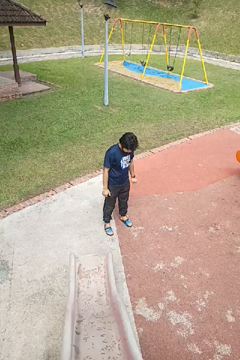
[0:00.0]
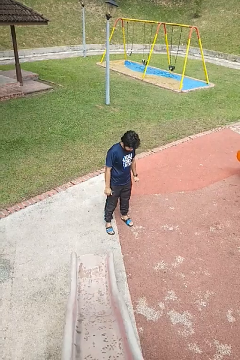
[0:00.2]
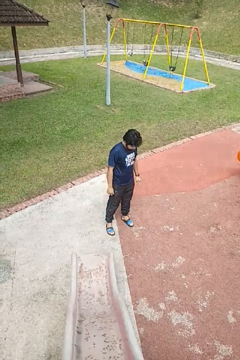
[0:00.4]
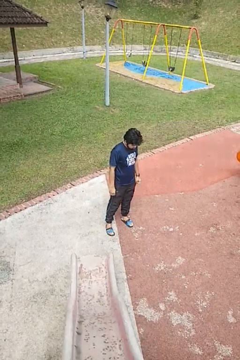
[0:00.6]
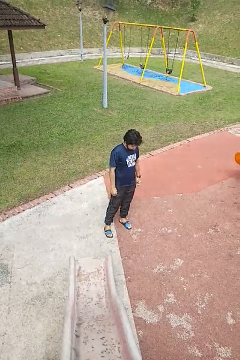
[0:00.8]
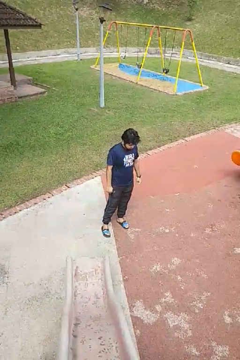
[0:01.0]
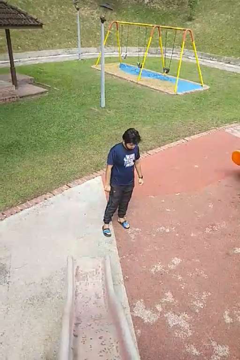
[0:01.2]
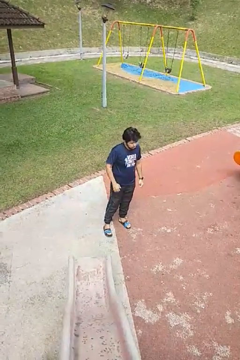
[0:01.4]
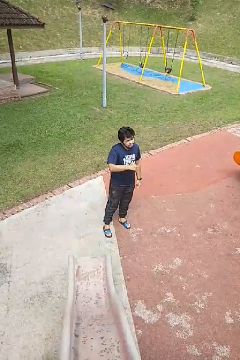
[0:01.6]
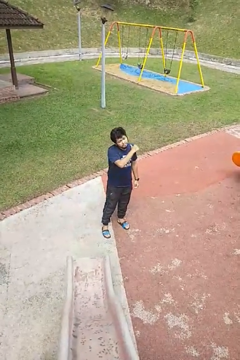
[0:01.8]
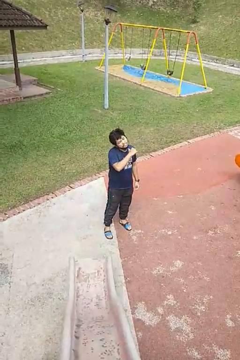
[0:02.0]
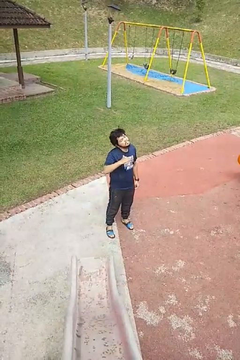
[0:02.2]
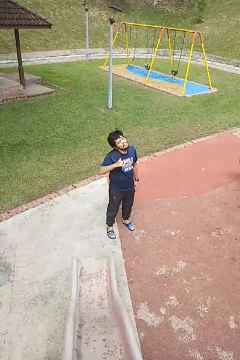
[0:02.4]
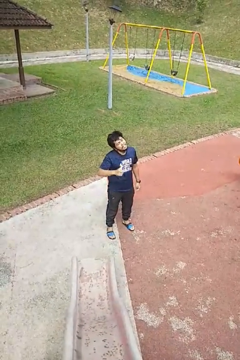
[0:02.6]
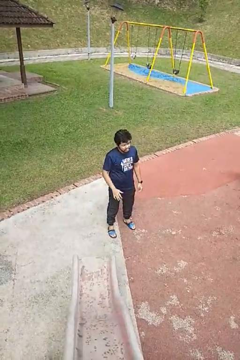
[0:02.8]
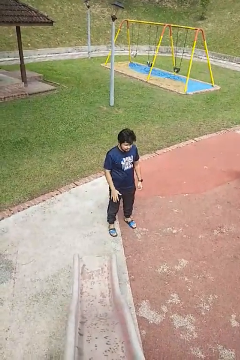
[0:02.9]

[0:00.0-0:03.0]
person gestures cut

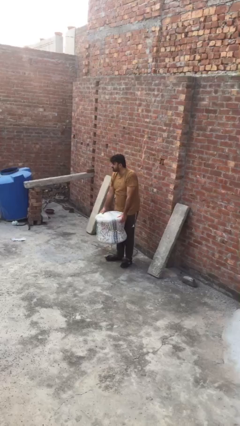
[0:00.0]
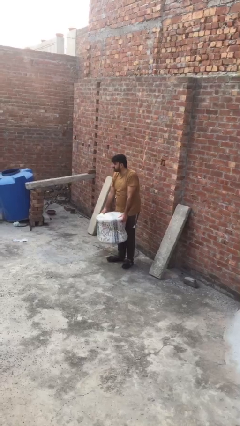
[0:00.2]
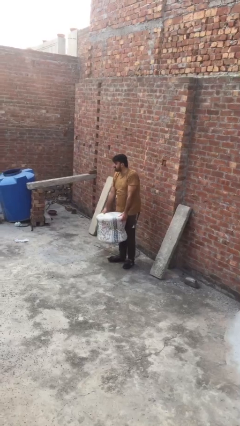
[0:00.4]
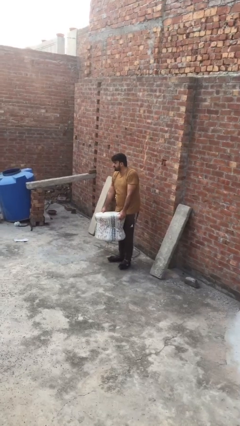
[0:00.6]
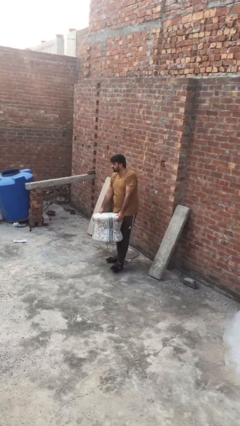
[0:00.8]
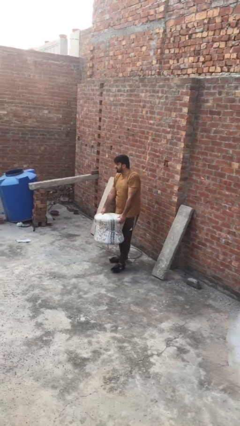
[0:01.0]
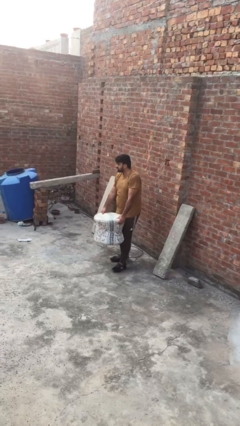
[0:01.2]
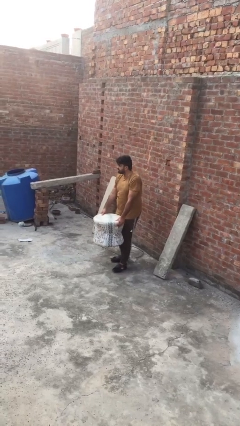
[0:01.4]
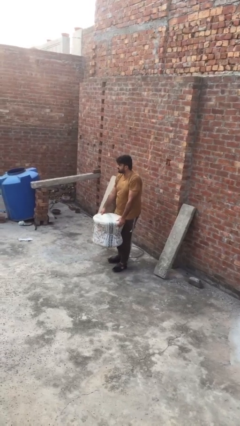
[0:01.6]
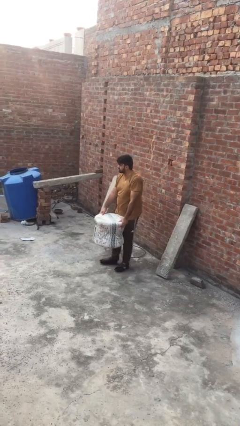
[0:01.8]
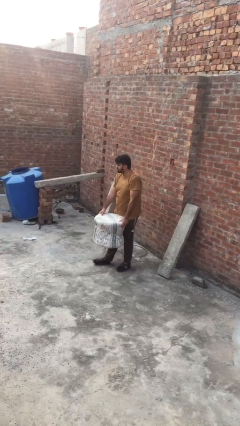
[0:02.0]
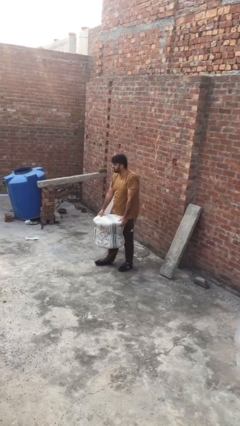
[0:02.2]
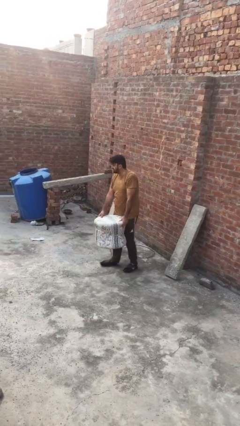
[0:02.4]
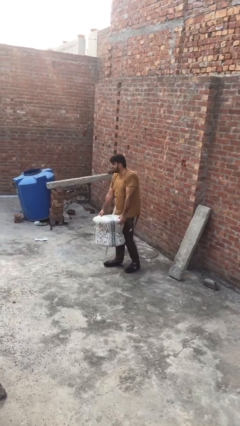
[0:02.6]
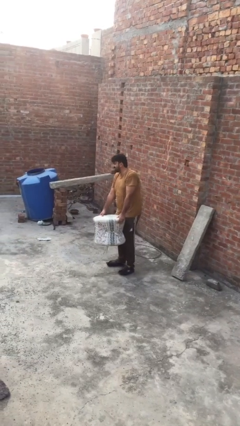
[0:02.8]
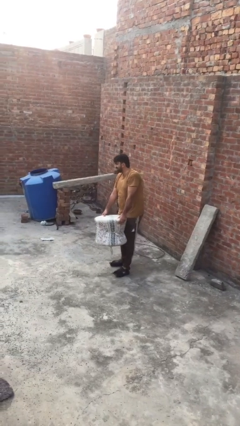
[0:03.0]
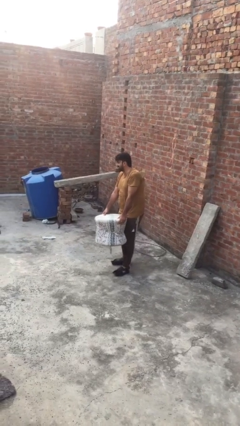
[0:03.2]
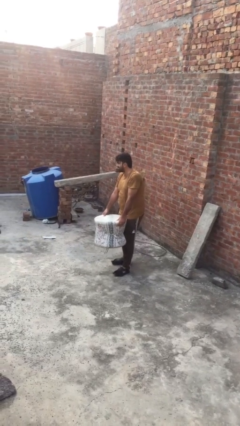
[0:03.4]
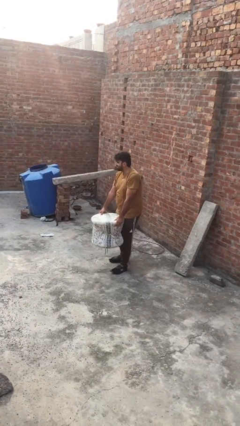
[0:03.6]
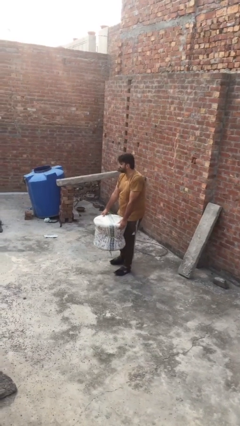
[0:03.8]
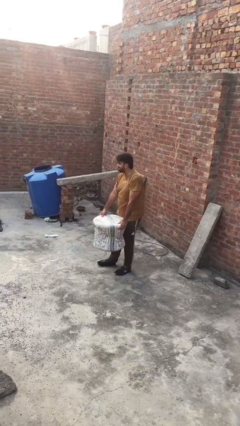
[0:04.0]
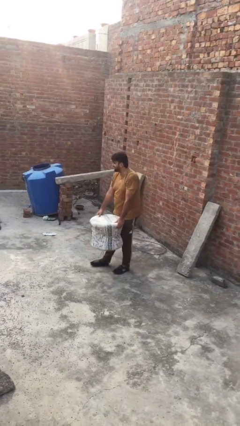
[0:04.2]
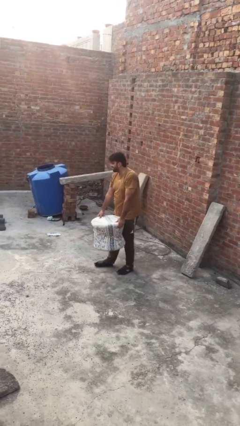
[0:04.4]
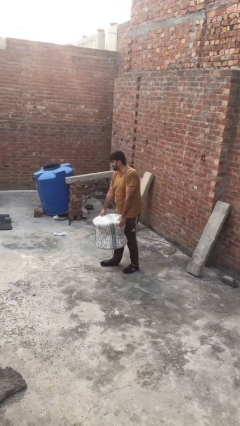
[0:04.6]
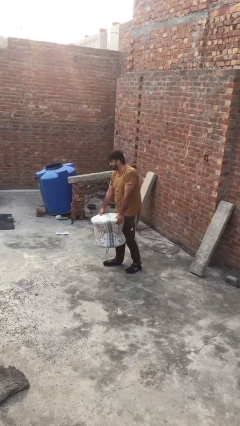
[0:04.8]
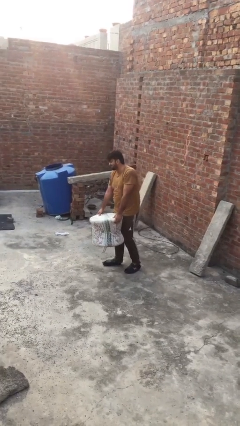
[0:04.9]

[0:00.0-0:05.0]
person carries heavy object

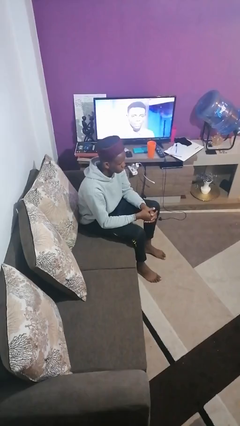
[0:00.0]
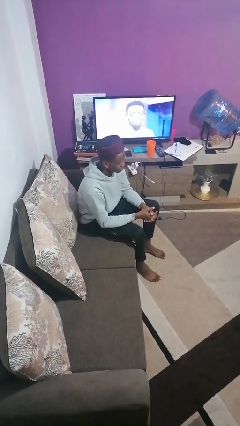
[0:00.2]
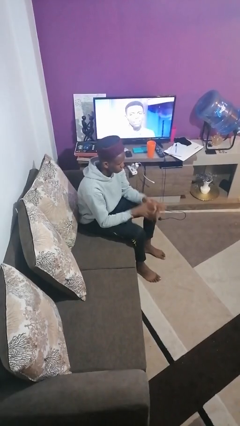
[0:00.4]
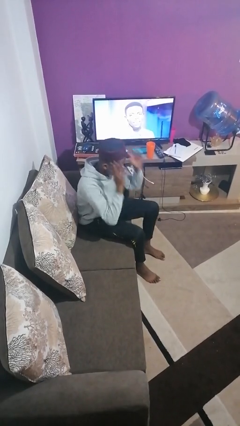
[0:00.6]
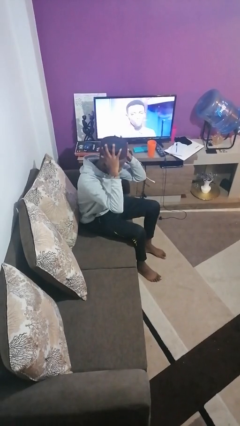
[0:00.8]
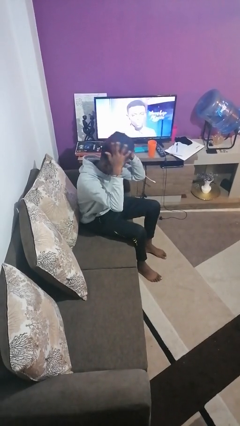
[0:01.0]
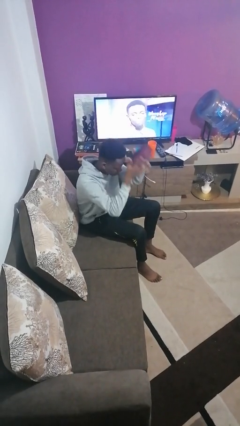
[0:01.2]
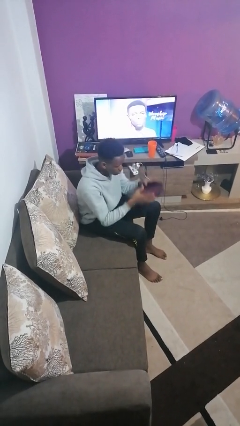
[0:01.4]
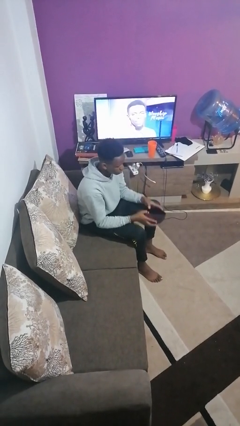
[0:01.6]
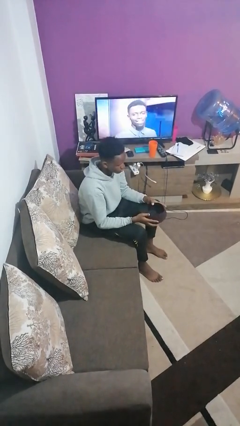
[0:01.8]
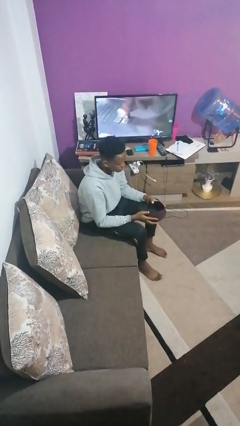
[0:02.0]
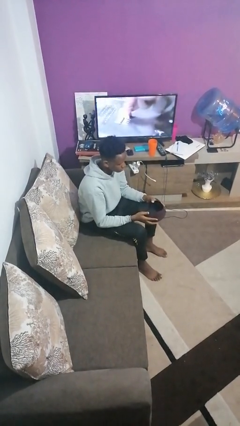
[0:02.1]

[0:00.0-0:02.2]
person takes off hat

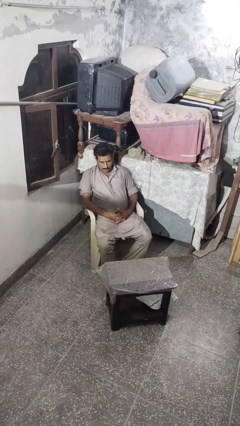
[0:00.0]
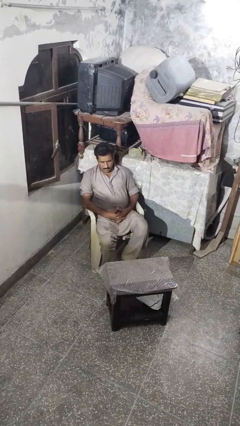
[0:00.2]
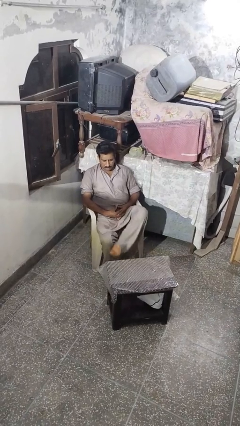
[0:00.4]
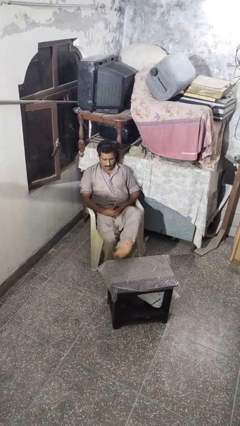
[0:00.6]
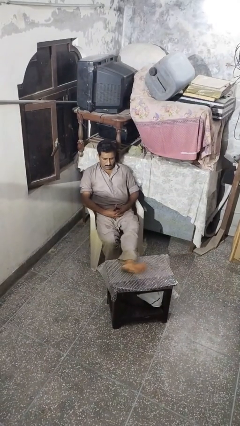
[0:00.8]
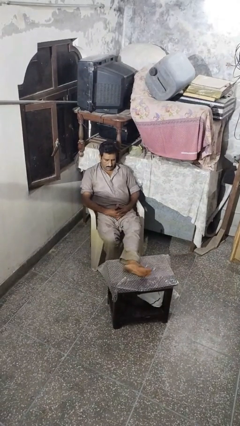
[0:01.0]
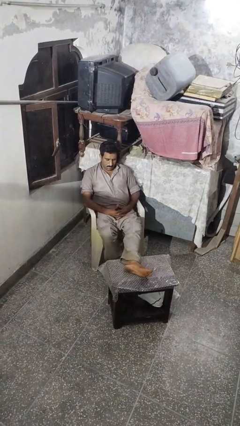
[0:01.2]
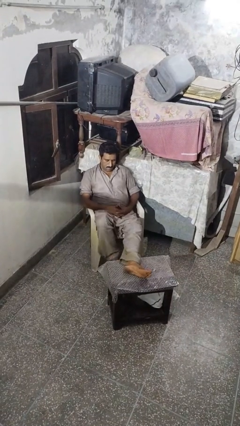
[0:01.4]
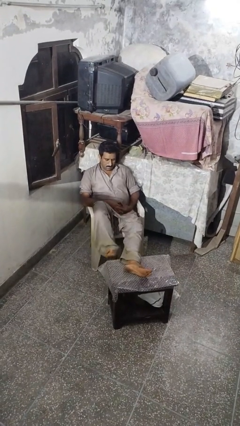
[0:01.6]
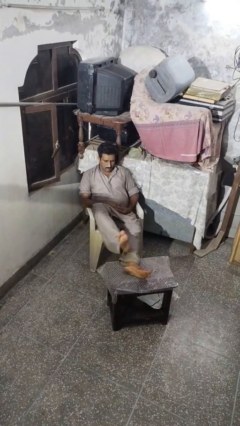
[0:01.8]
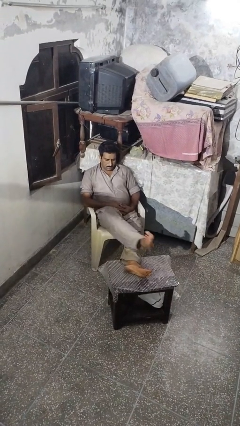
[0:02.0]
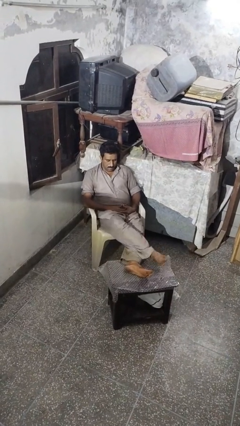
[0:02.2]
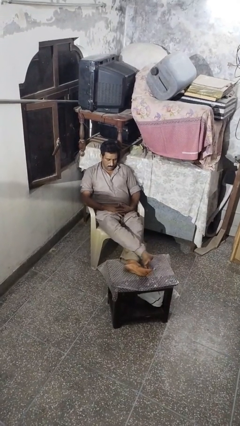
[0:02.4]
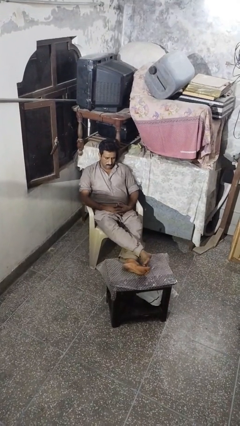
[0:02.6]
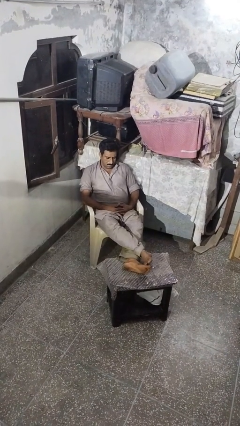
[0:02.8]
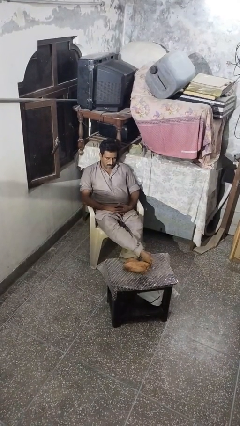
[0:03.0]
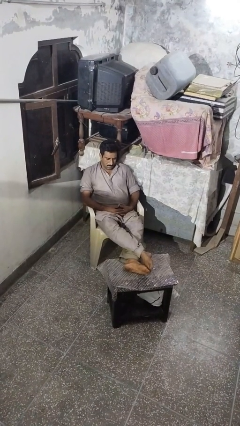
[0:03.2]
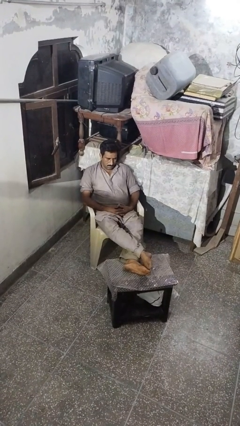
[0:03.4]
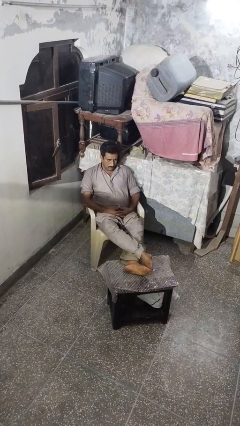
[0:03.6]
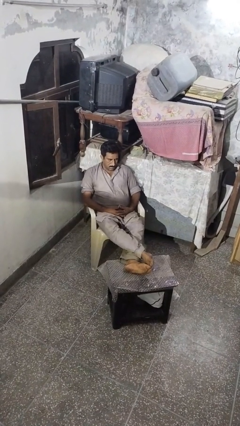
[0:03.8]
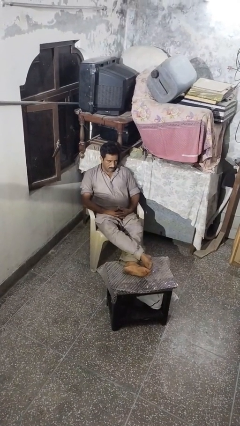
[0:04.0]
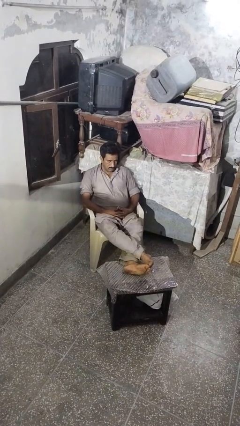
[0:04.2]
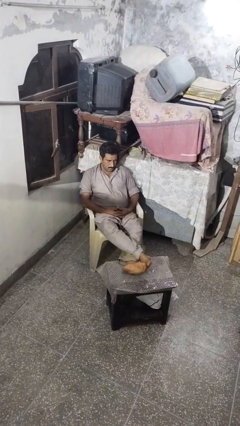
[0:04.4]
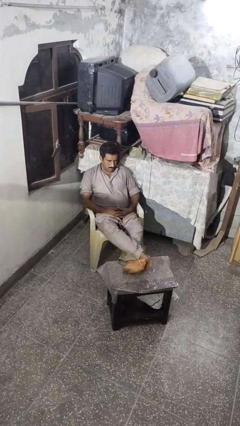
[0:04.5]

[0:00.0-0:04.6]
person puts feet up

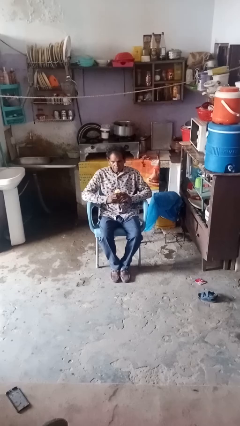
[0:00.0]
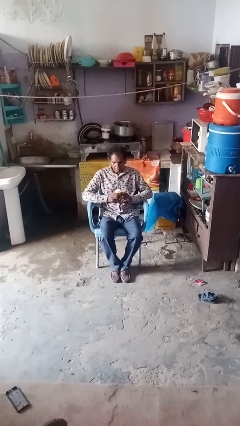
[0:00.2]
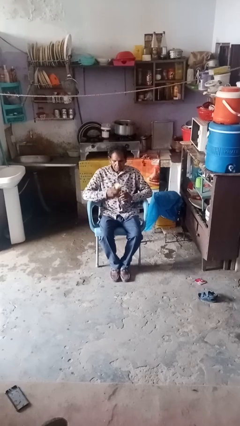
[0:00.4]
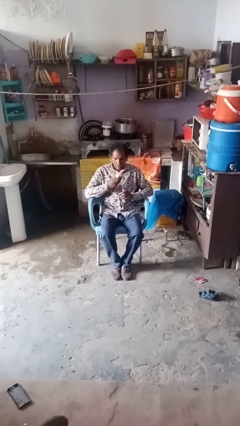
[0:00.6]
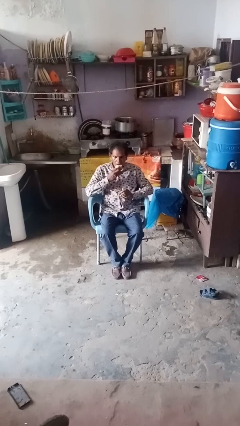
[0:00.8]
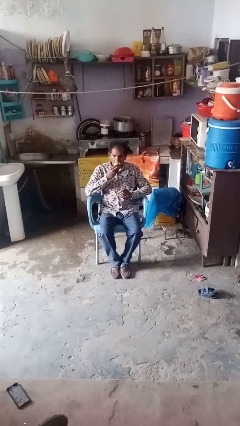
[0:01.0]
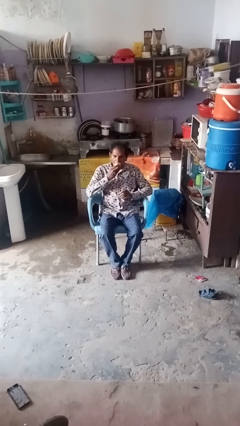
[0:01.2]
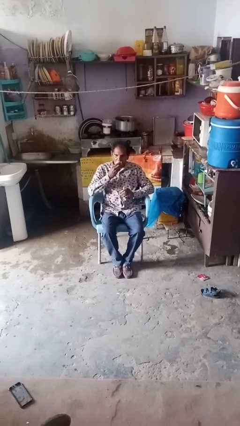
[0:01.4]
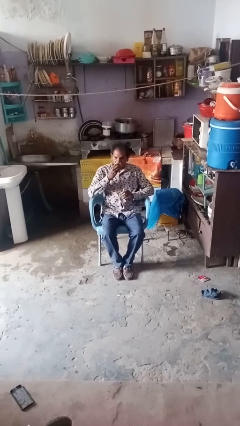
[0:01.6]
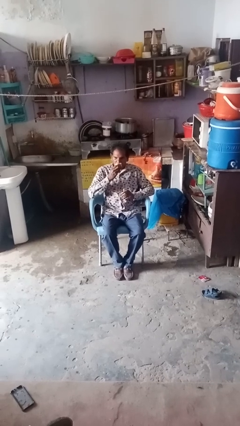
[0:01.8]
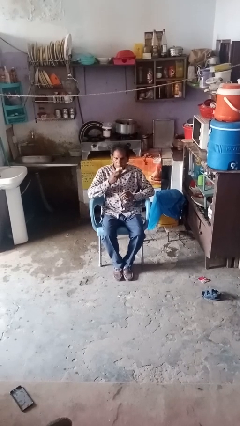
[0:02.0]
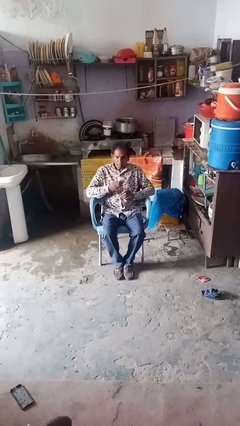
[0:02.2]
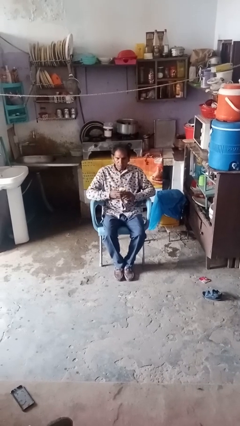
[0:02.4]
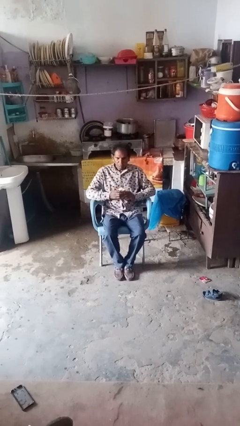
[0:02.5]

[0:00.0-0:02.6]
person eats apple

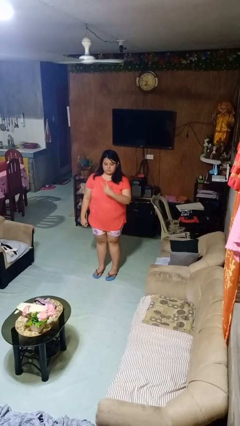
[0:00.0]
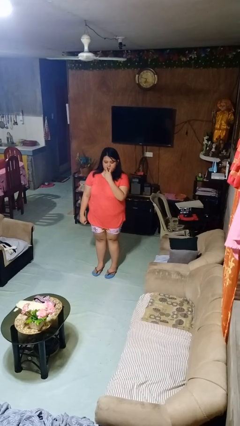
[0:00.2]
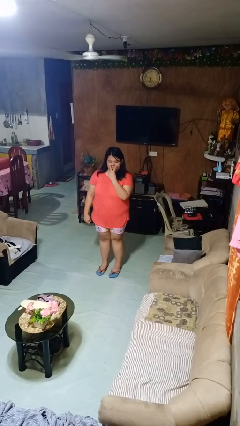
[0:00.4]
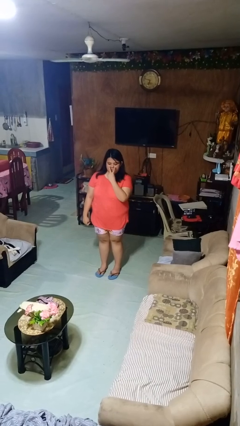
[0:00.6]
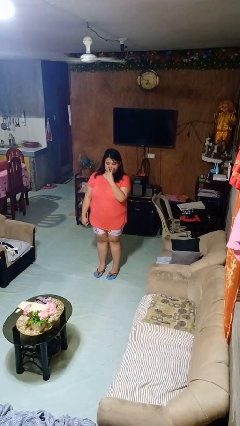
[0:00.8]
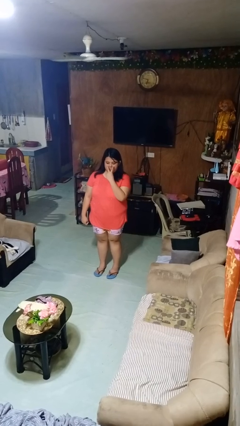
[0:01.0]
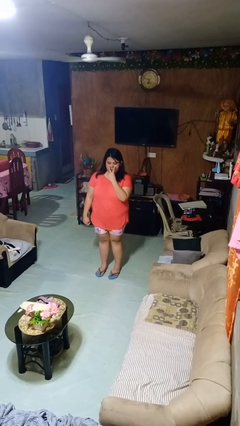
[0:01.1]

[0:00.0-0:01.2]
person gestures watch closely
